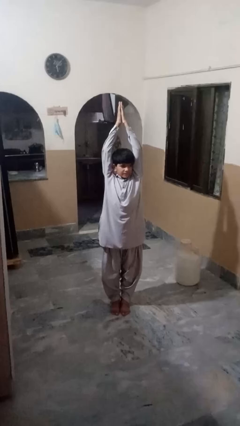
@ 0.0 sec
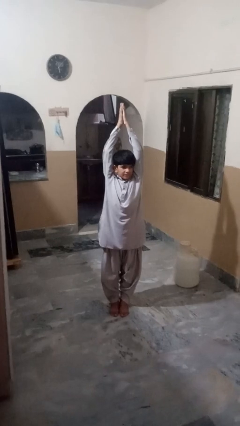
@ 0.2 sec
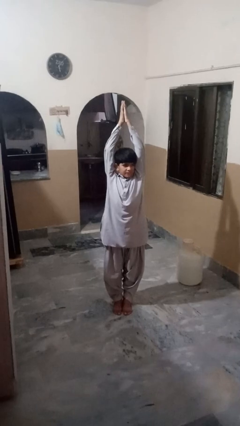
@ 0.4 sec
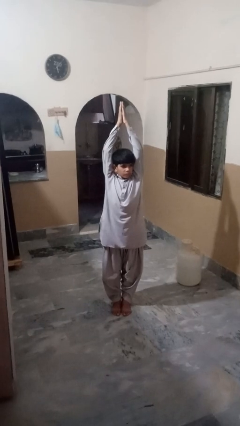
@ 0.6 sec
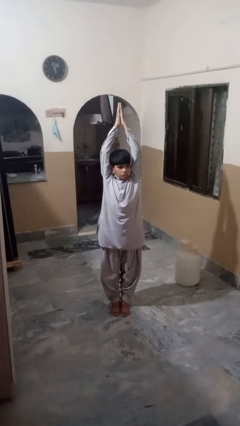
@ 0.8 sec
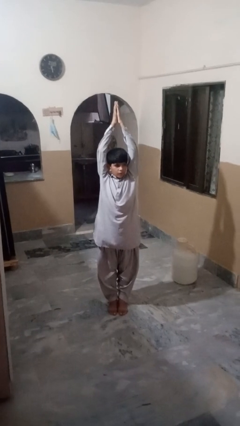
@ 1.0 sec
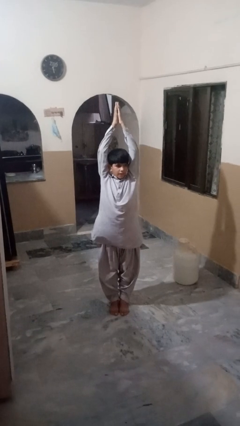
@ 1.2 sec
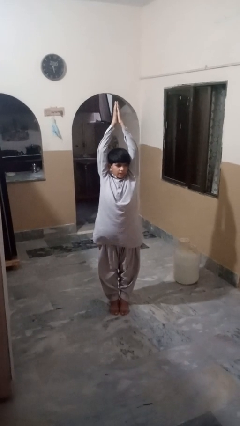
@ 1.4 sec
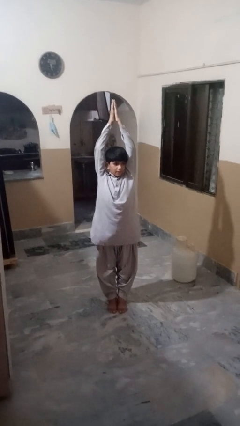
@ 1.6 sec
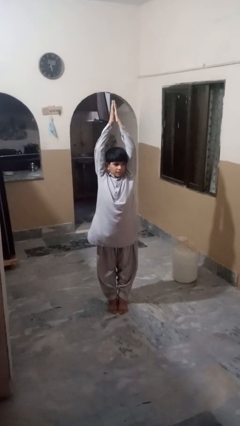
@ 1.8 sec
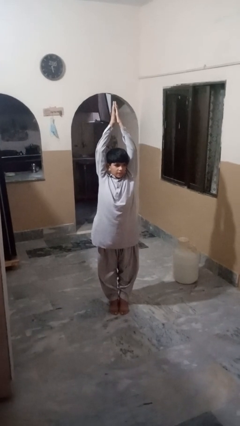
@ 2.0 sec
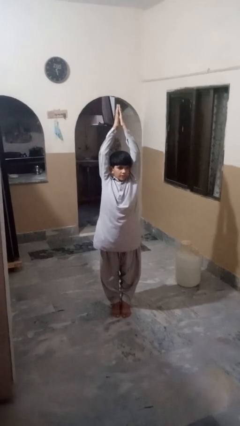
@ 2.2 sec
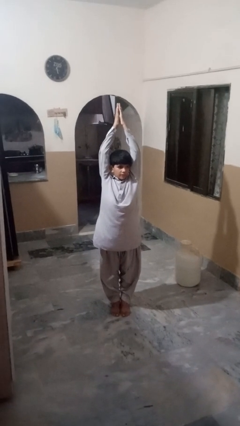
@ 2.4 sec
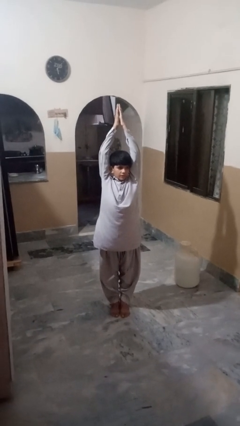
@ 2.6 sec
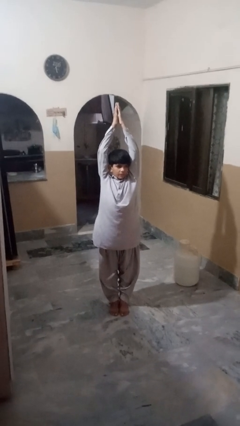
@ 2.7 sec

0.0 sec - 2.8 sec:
person exercises with jumping jacks

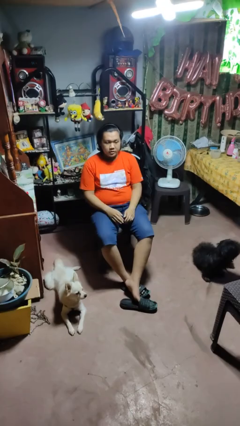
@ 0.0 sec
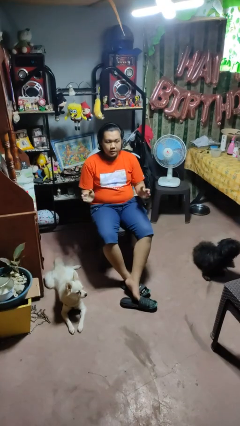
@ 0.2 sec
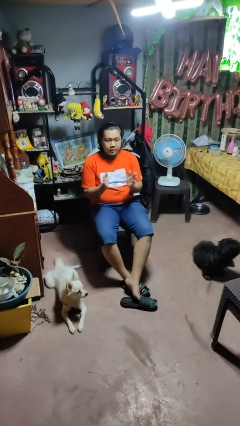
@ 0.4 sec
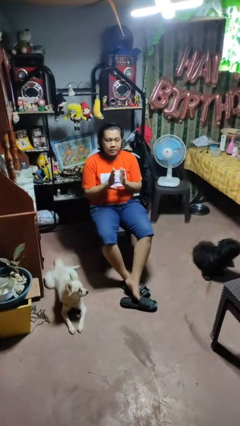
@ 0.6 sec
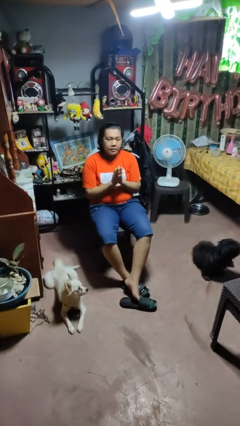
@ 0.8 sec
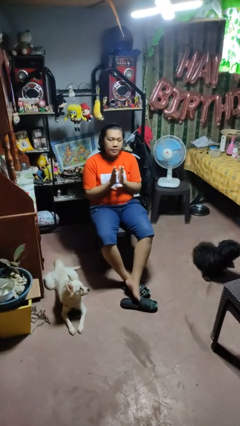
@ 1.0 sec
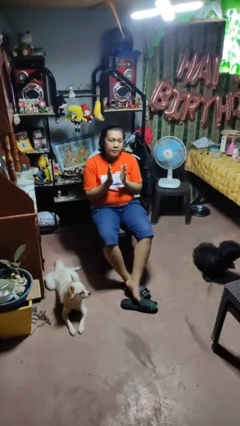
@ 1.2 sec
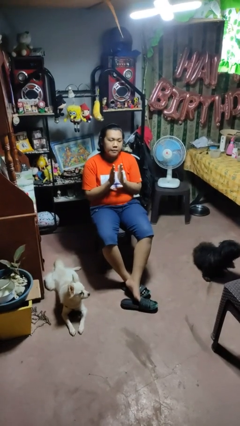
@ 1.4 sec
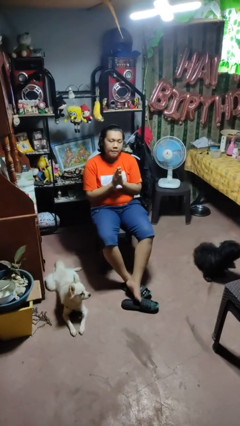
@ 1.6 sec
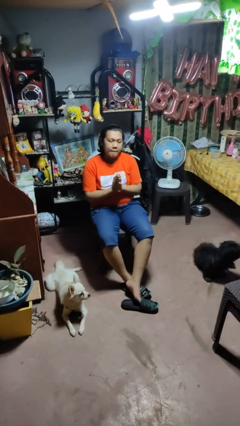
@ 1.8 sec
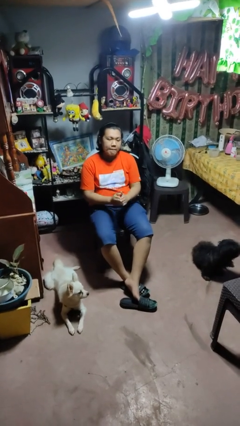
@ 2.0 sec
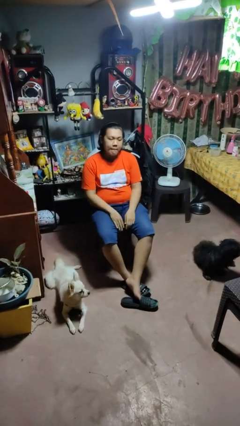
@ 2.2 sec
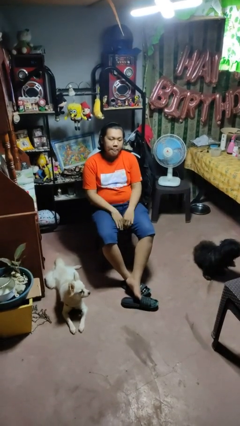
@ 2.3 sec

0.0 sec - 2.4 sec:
person claps hands

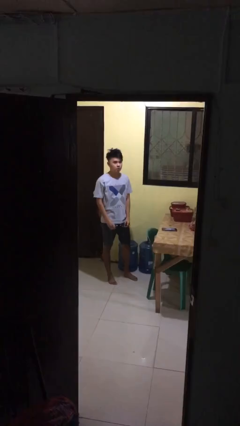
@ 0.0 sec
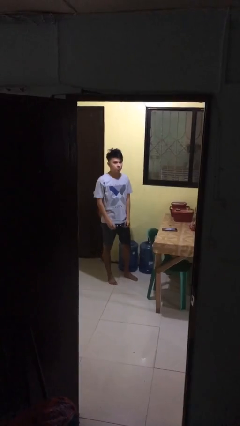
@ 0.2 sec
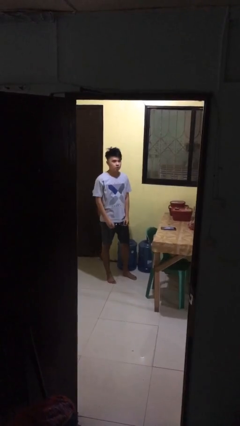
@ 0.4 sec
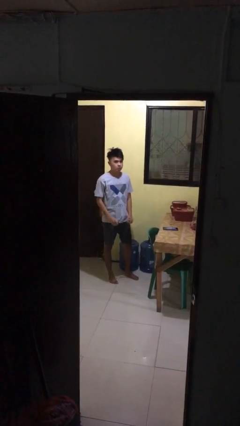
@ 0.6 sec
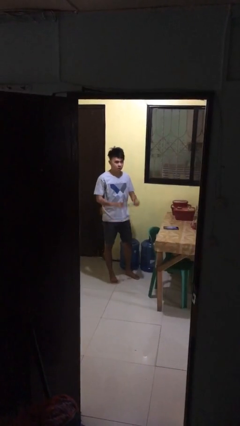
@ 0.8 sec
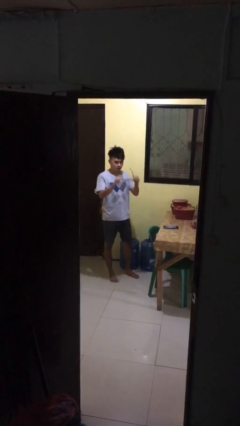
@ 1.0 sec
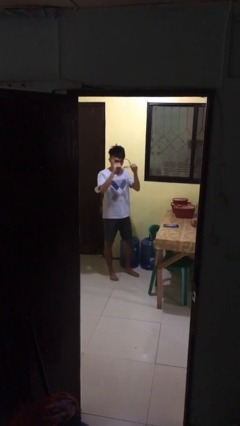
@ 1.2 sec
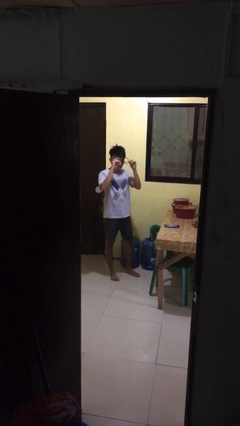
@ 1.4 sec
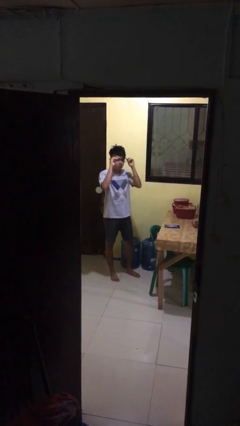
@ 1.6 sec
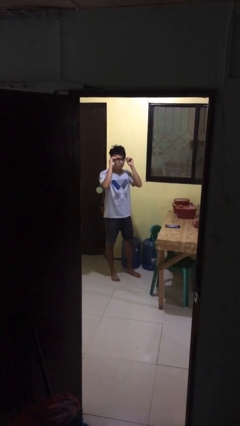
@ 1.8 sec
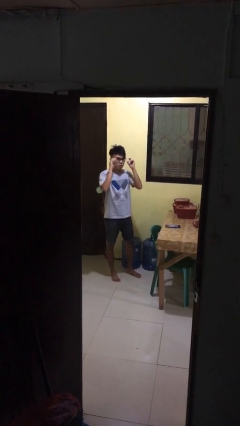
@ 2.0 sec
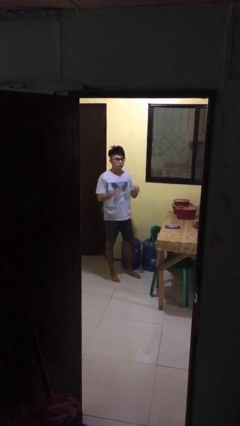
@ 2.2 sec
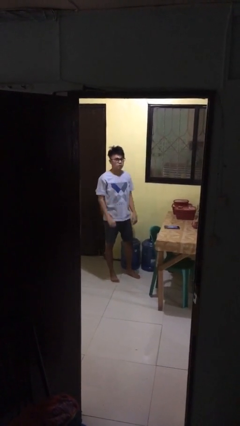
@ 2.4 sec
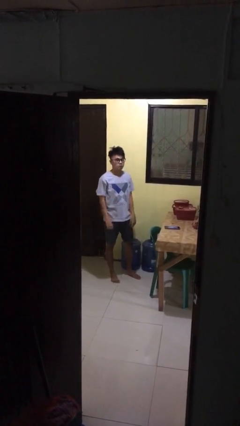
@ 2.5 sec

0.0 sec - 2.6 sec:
person puts on glasses

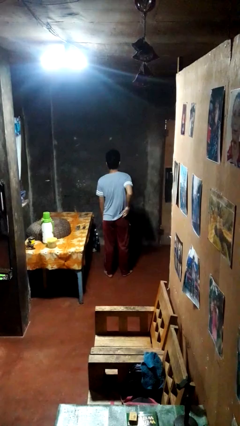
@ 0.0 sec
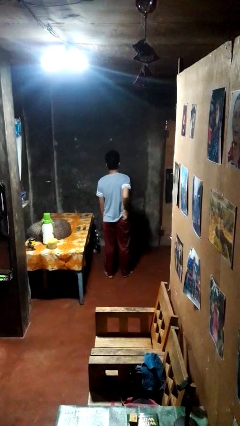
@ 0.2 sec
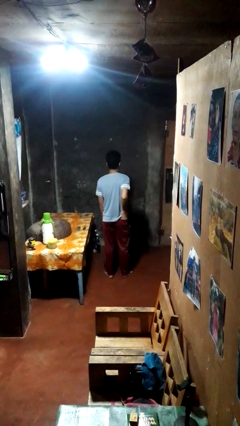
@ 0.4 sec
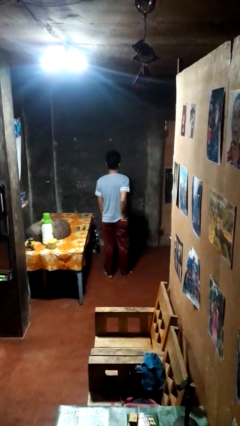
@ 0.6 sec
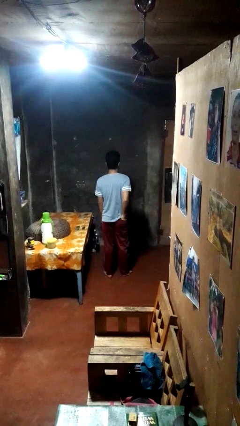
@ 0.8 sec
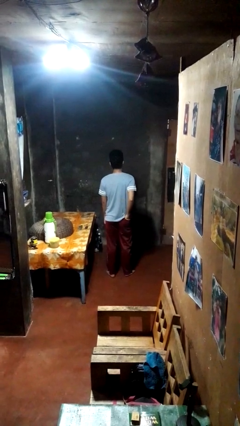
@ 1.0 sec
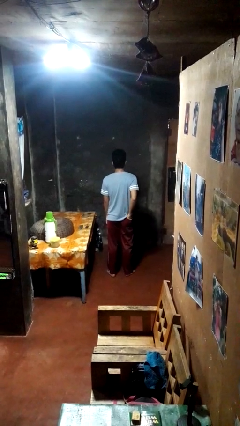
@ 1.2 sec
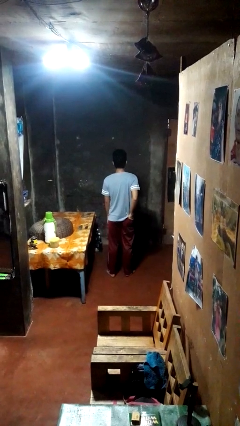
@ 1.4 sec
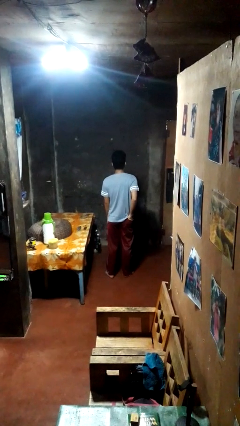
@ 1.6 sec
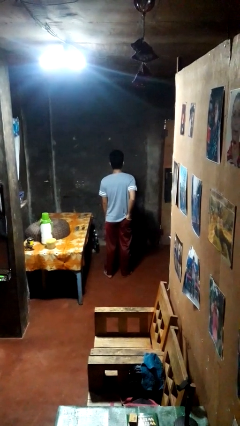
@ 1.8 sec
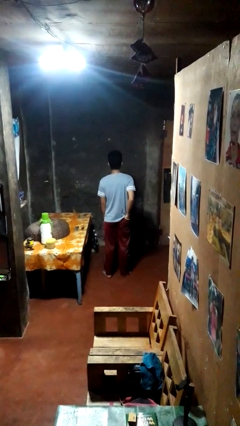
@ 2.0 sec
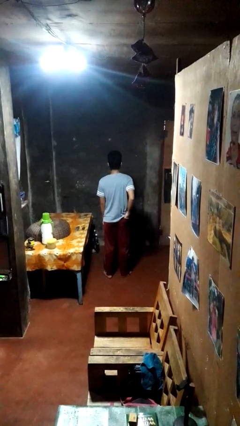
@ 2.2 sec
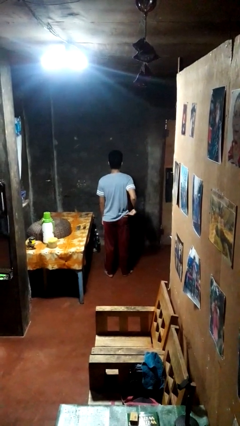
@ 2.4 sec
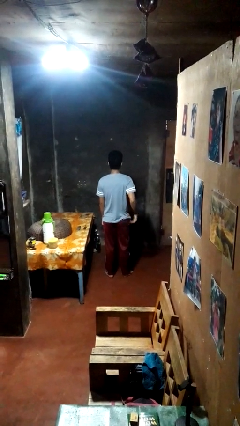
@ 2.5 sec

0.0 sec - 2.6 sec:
person puts hands in back pockets

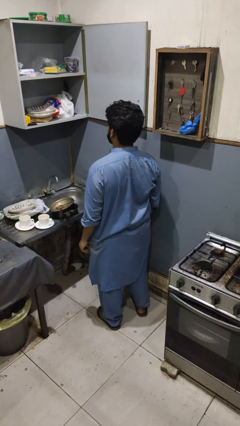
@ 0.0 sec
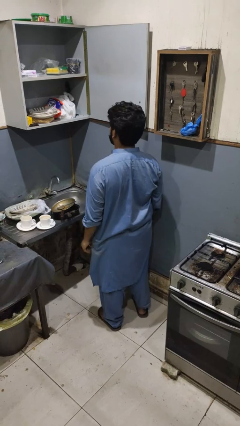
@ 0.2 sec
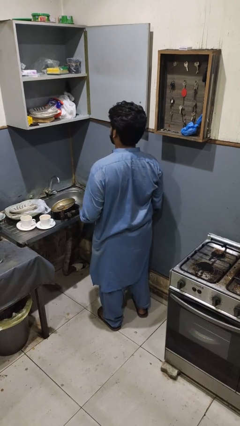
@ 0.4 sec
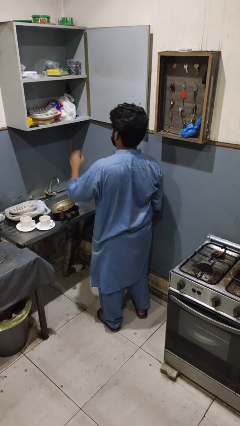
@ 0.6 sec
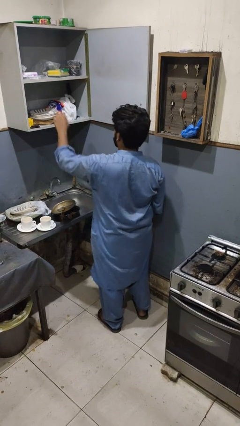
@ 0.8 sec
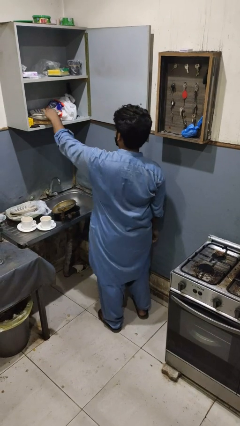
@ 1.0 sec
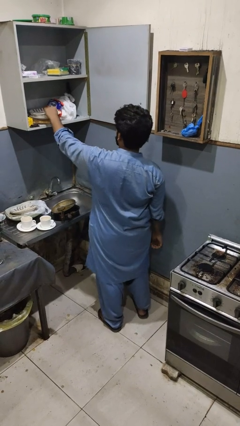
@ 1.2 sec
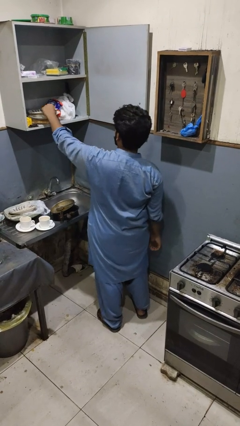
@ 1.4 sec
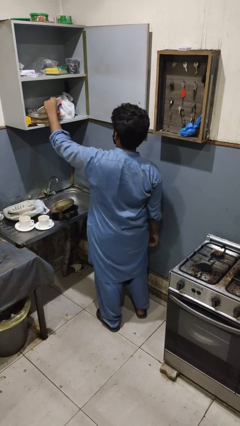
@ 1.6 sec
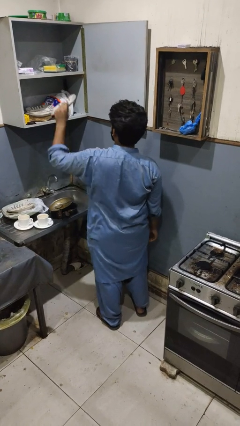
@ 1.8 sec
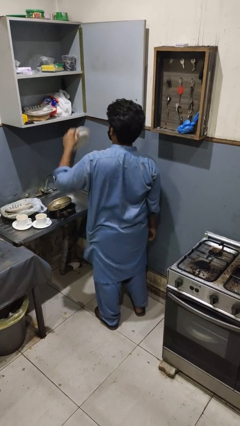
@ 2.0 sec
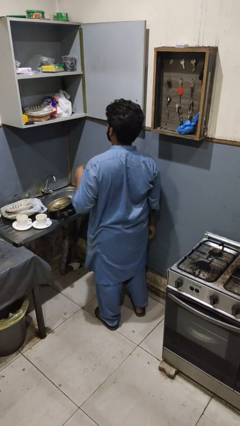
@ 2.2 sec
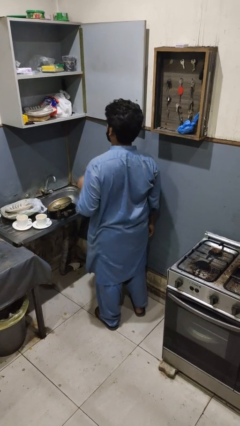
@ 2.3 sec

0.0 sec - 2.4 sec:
person takes object from cabinet

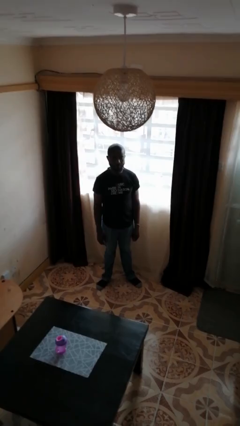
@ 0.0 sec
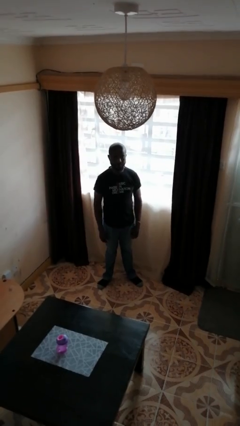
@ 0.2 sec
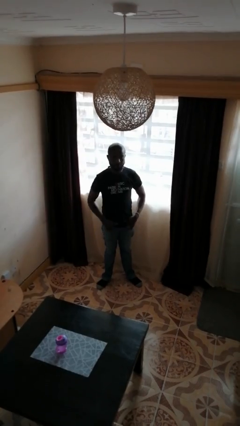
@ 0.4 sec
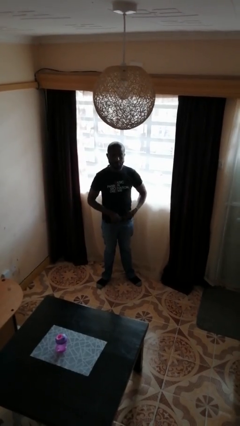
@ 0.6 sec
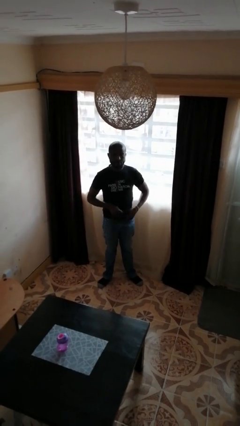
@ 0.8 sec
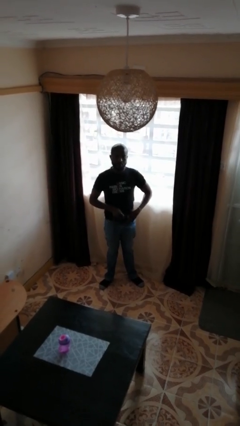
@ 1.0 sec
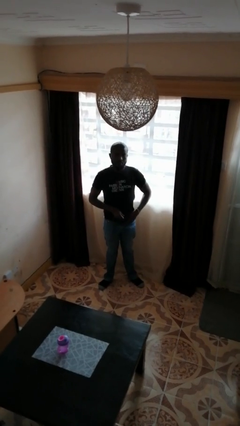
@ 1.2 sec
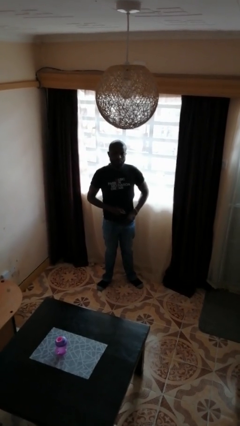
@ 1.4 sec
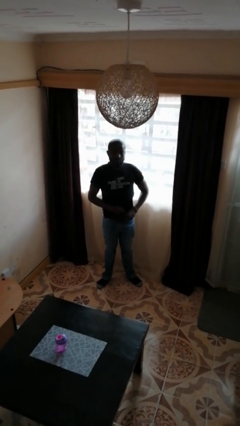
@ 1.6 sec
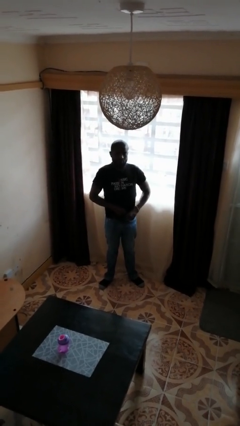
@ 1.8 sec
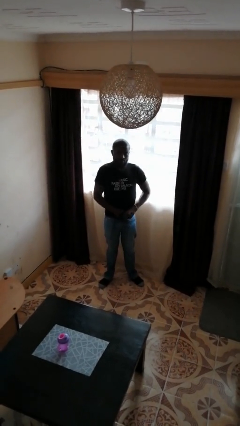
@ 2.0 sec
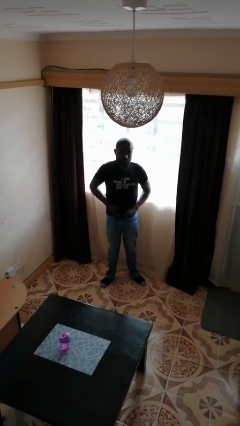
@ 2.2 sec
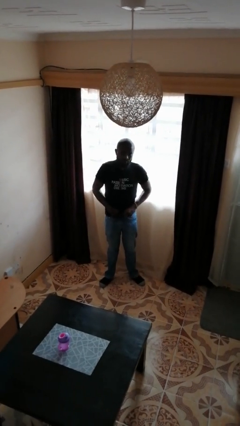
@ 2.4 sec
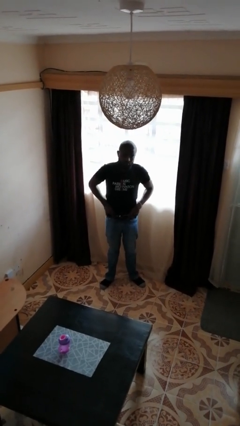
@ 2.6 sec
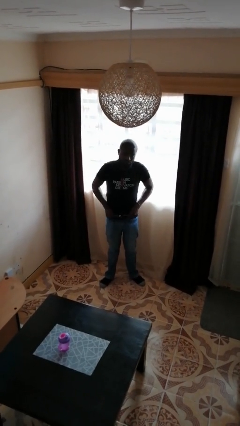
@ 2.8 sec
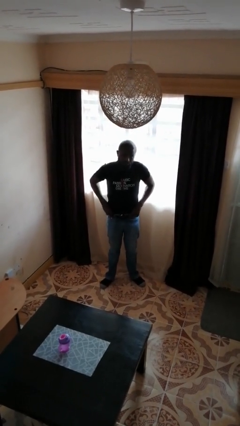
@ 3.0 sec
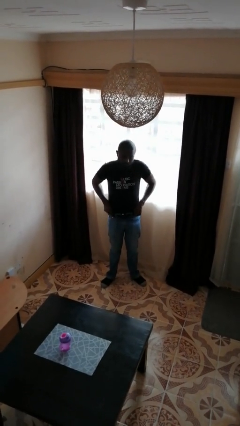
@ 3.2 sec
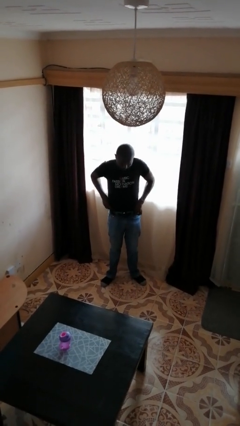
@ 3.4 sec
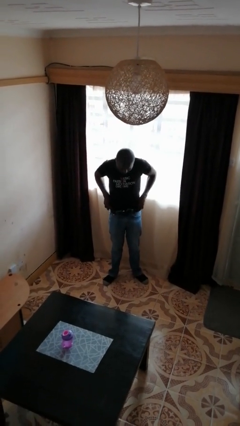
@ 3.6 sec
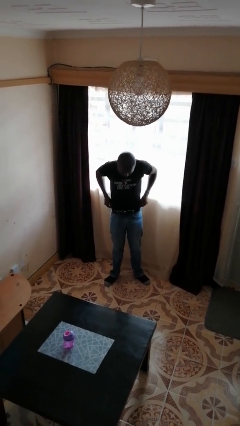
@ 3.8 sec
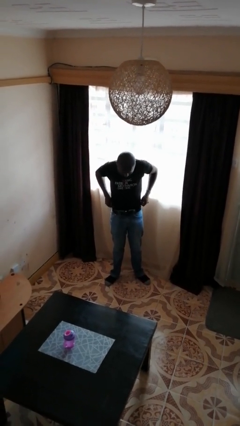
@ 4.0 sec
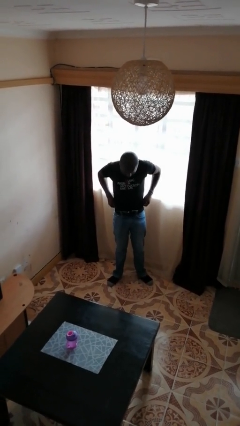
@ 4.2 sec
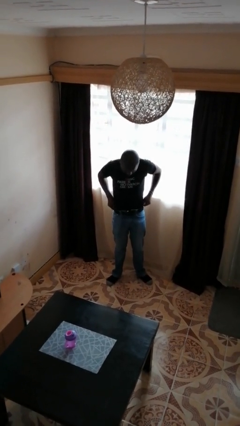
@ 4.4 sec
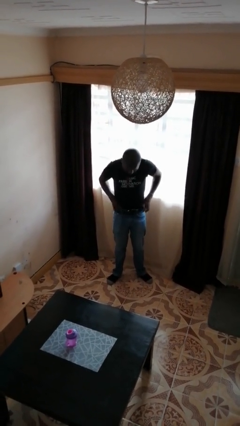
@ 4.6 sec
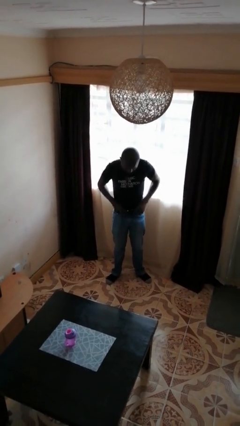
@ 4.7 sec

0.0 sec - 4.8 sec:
person tucks in shirt
